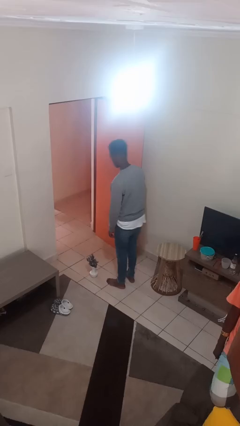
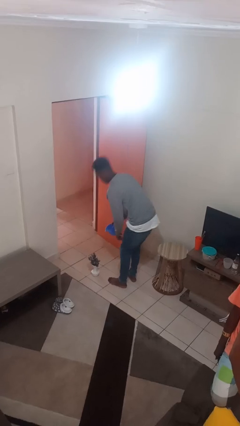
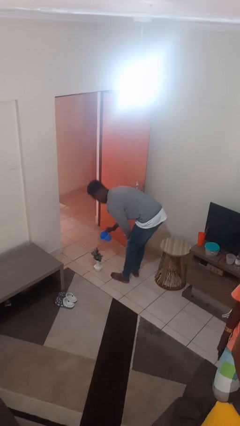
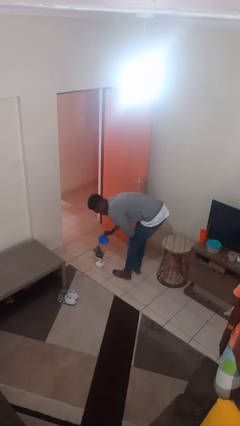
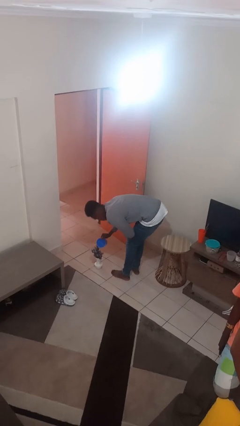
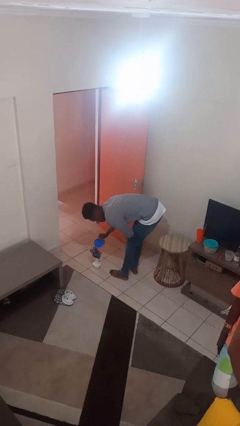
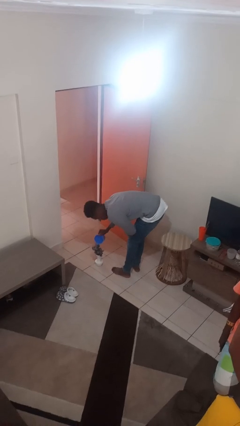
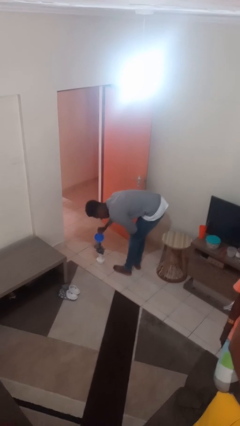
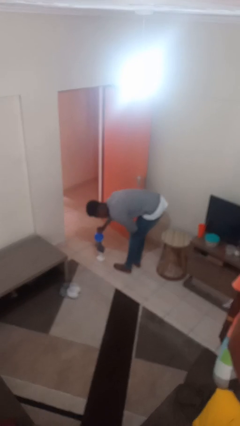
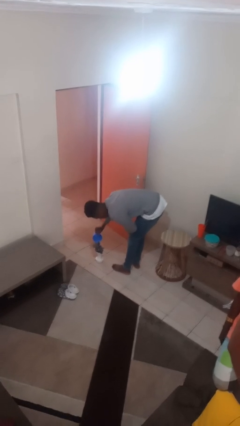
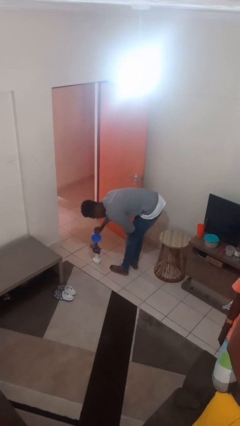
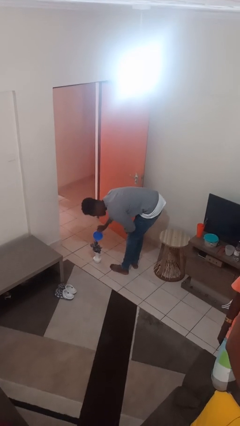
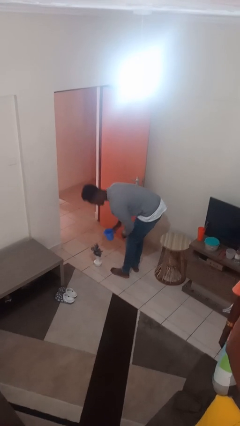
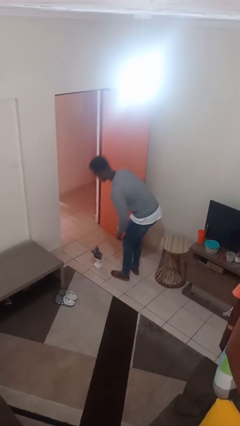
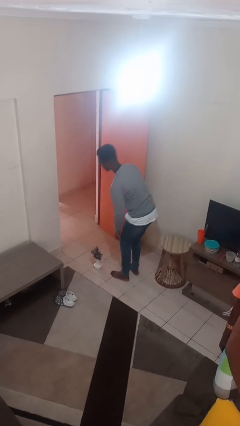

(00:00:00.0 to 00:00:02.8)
person waters houseplant

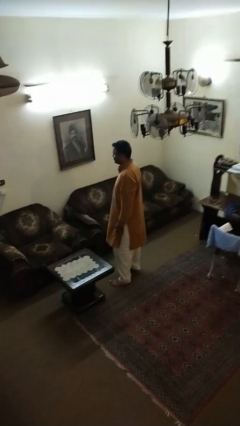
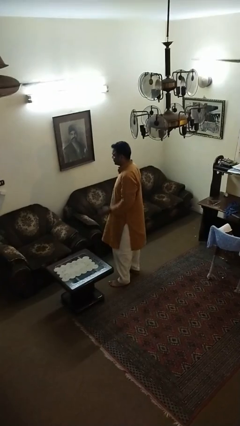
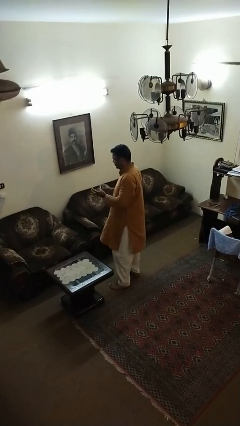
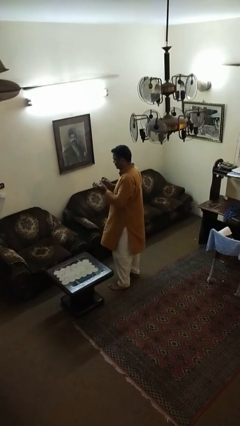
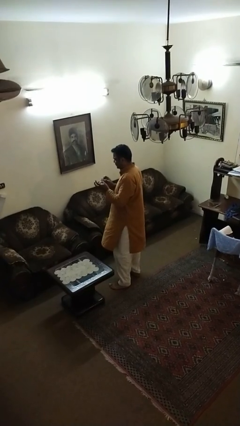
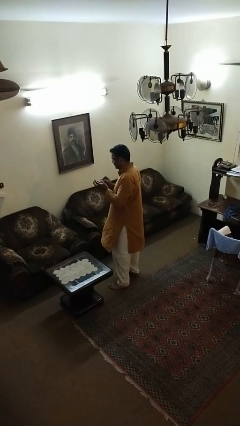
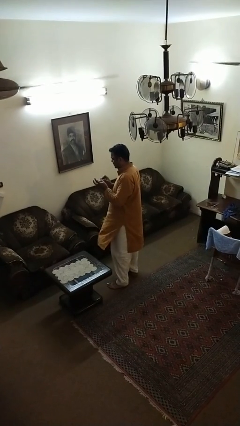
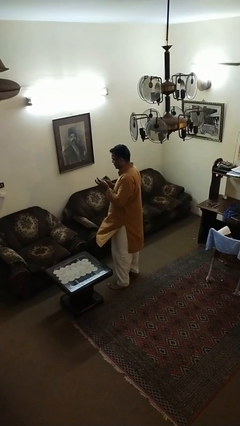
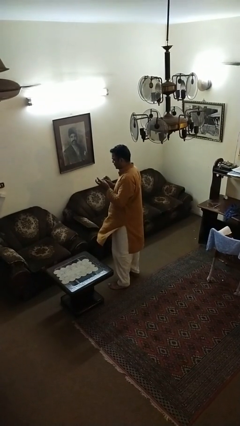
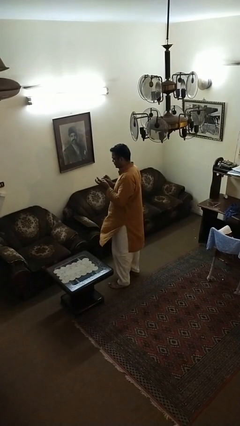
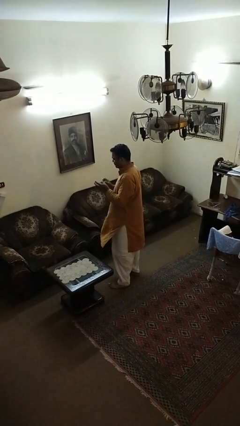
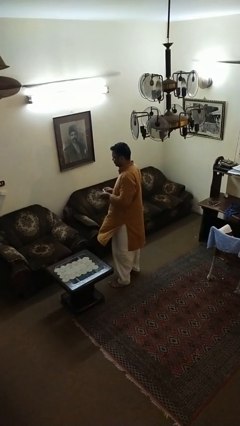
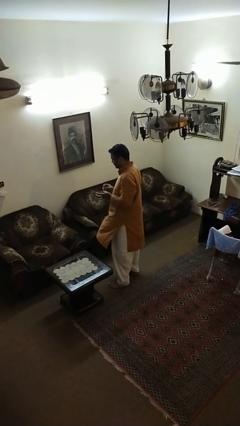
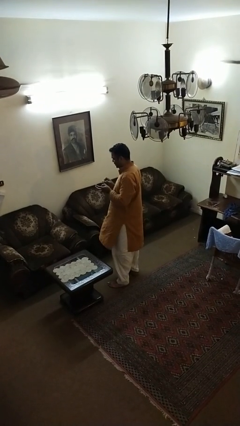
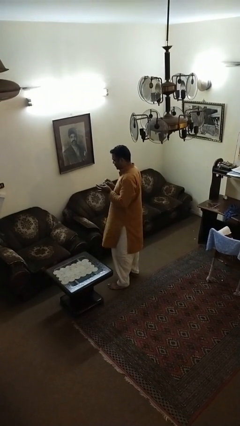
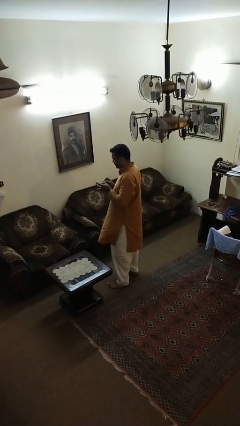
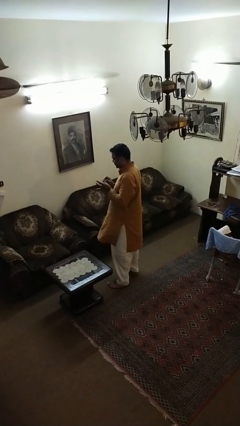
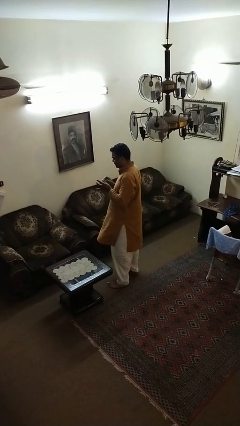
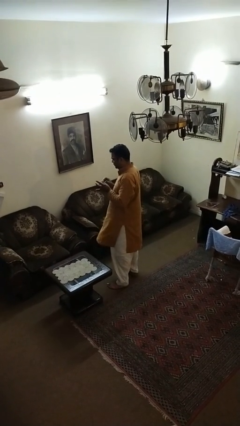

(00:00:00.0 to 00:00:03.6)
person clips fingernails

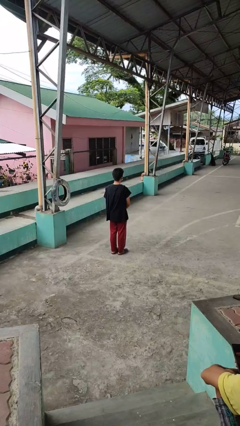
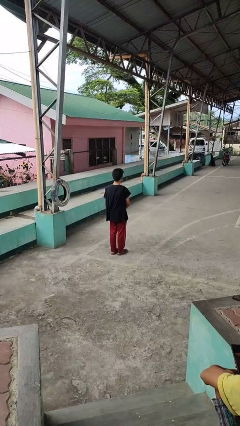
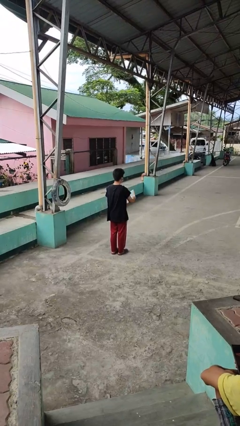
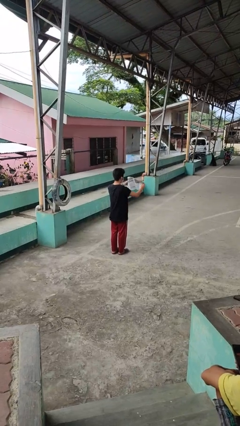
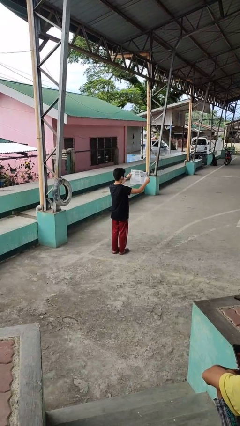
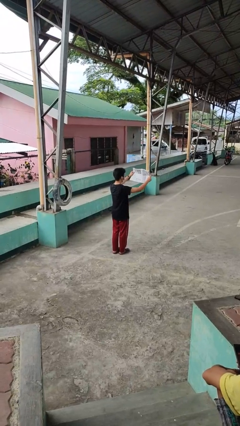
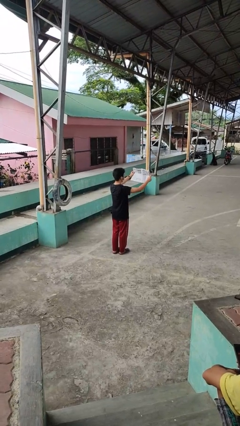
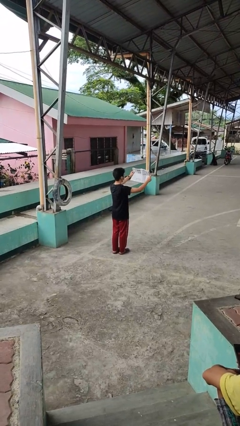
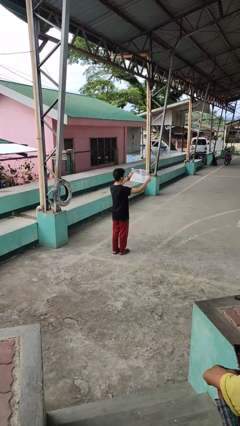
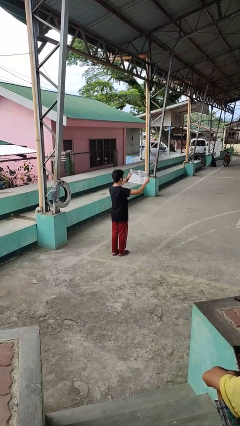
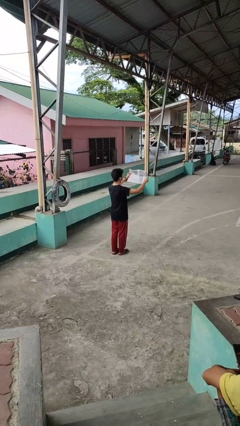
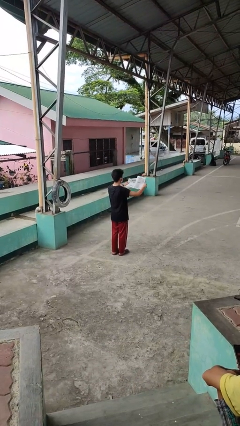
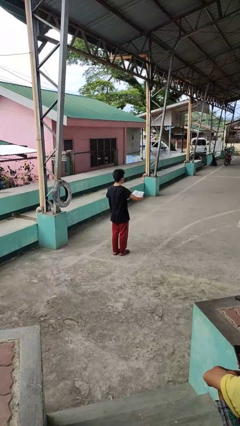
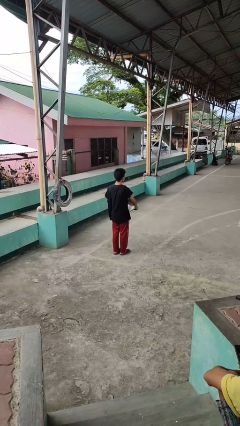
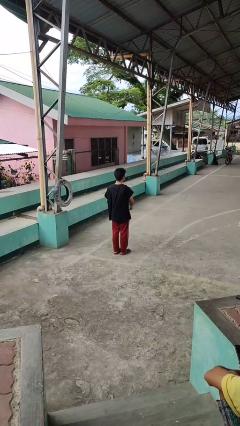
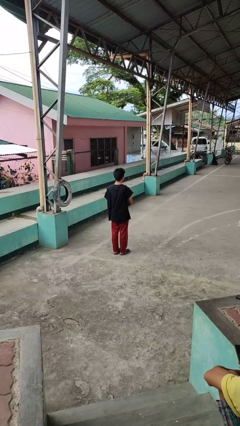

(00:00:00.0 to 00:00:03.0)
person reads newspaper

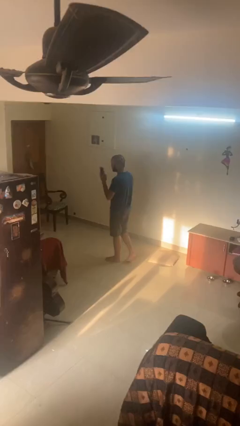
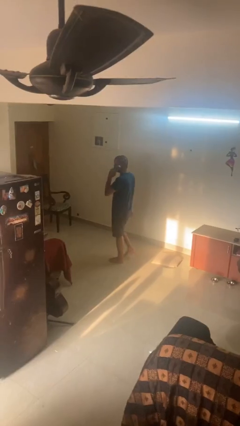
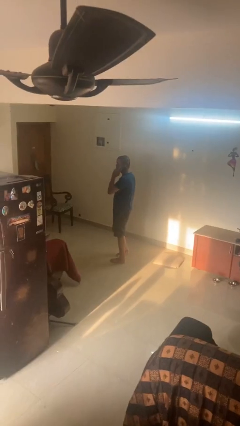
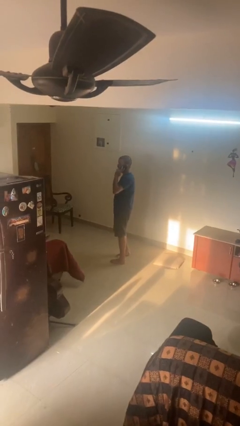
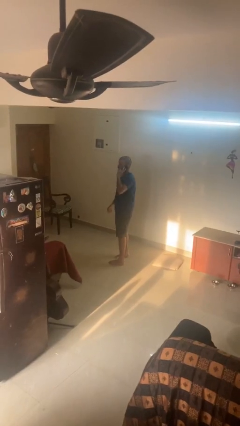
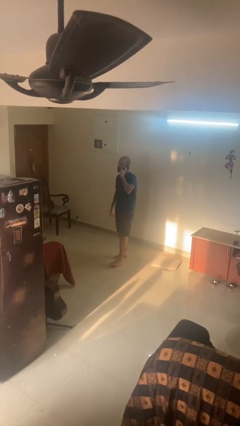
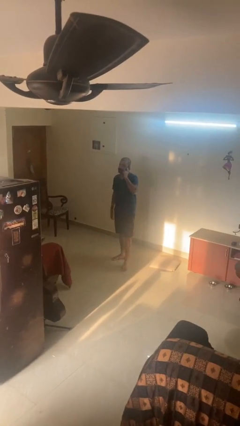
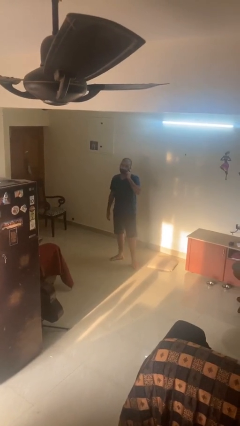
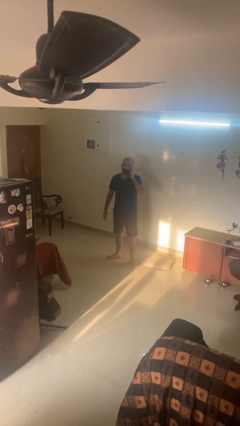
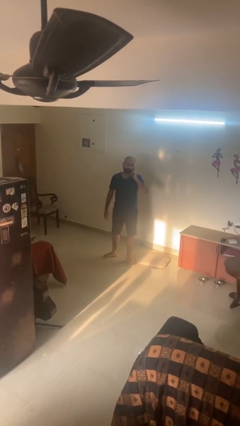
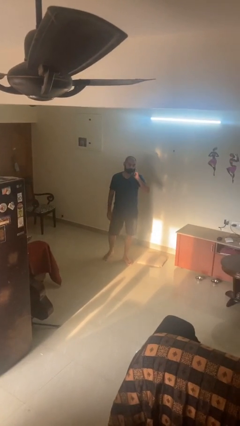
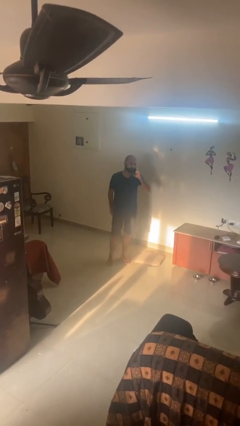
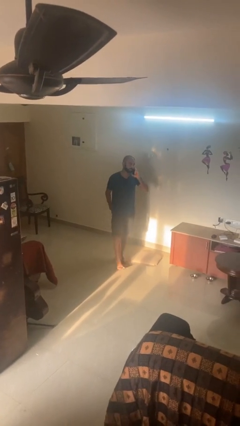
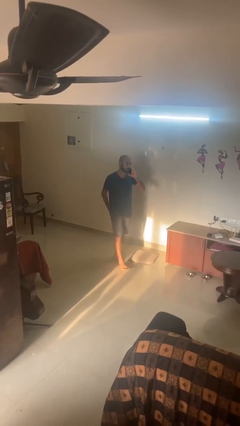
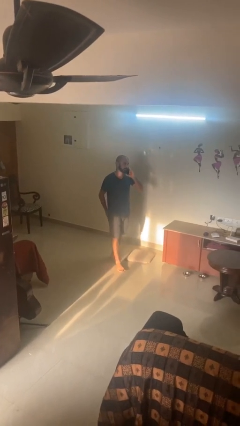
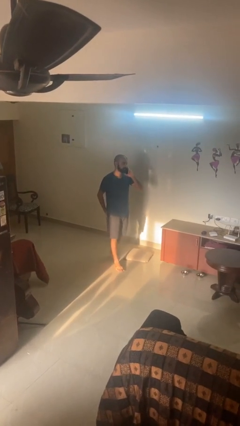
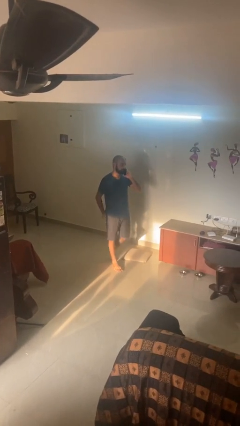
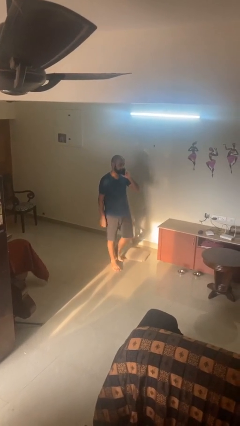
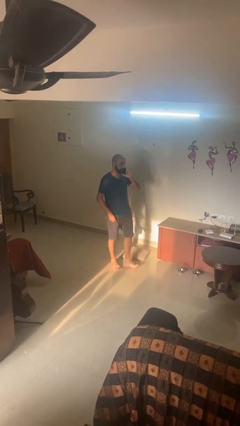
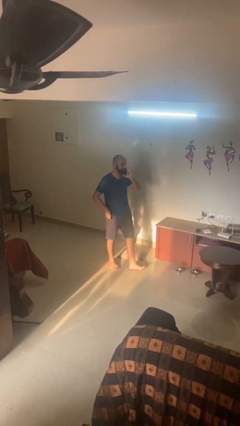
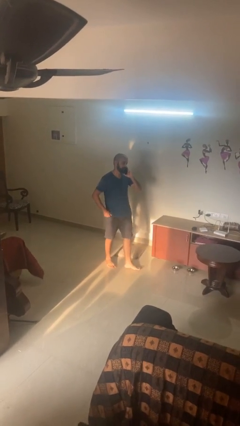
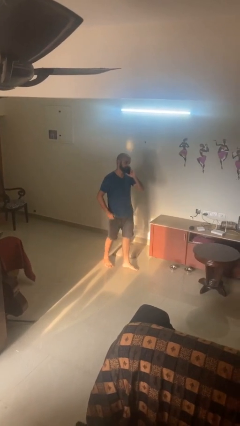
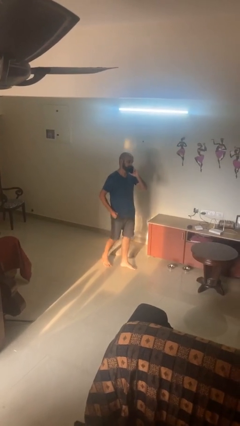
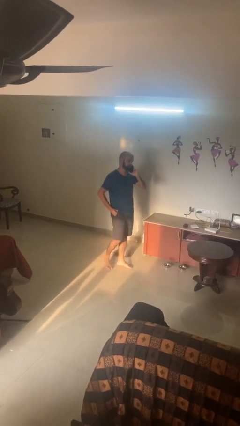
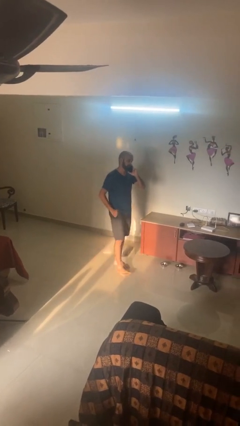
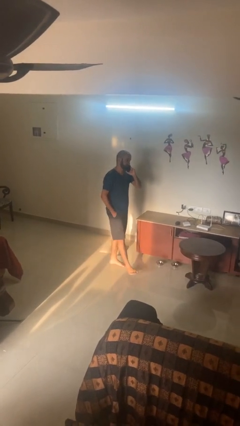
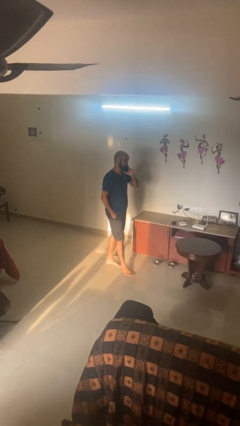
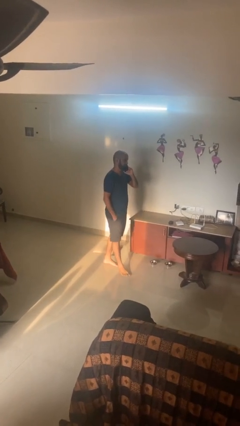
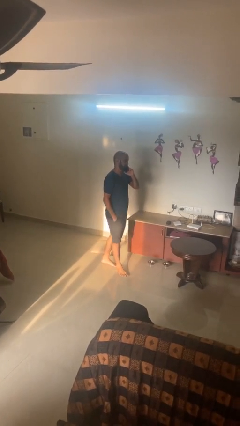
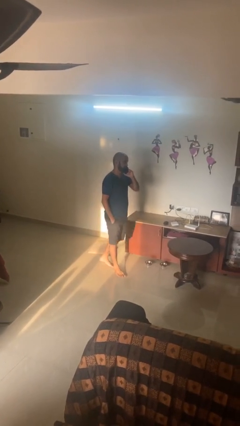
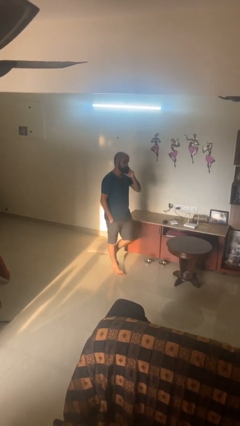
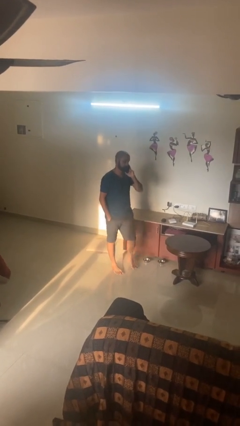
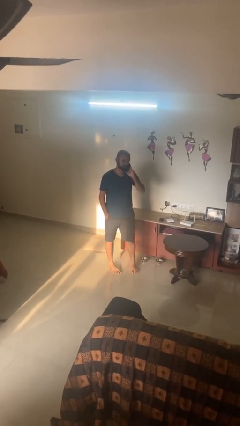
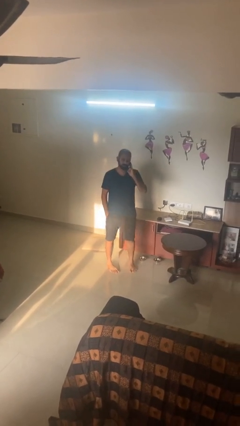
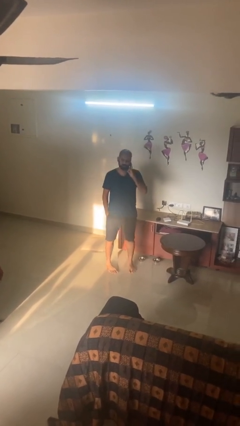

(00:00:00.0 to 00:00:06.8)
person talks on phone

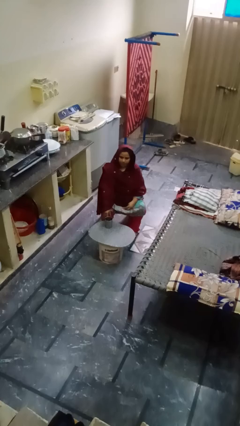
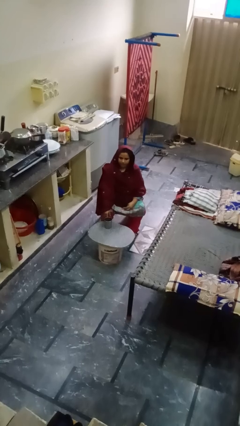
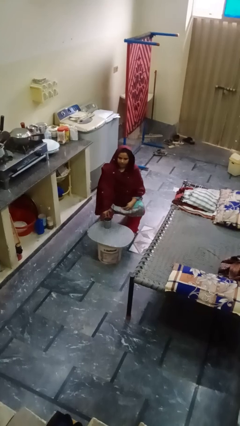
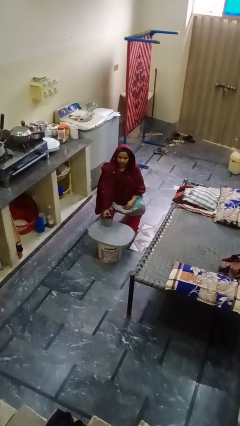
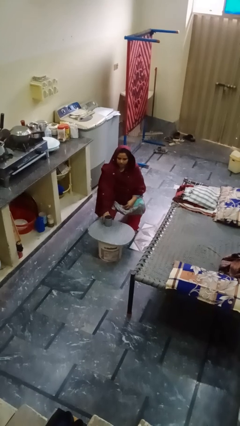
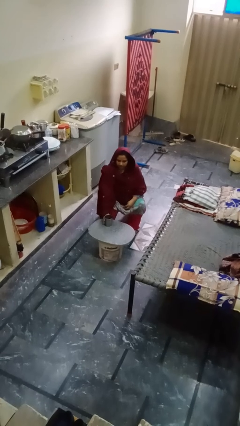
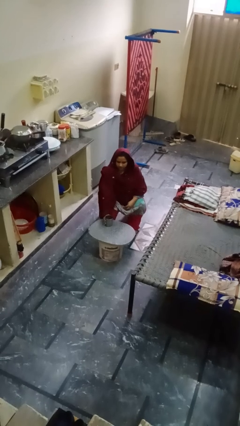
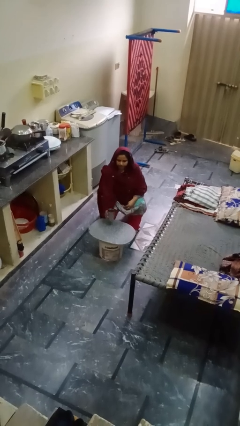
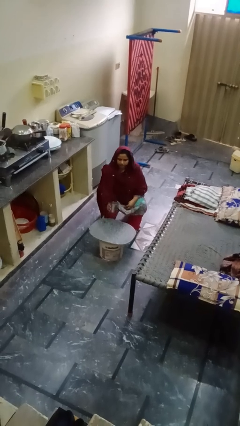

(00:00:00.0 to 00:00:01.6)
person picks up object from table
